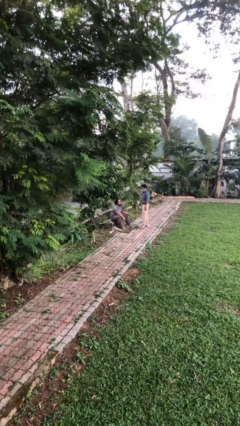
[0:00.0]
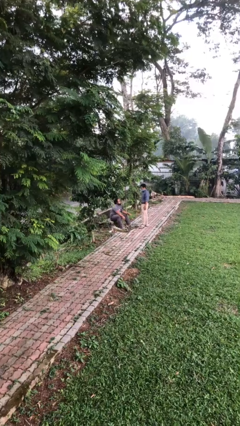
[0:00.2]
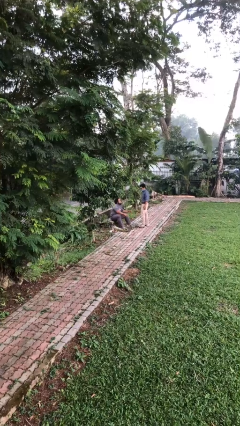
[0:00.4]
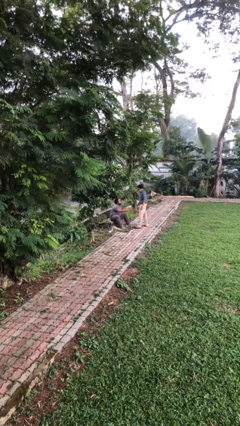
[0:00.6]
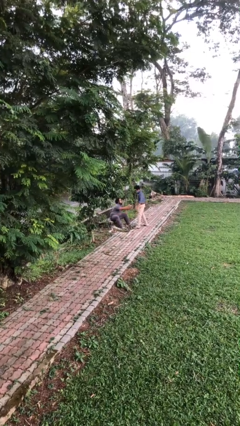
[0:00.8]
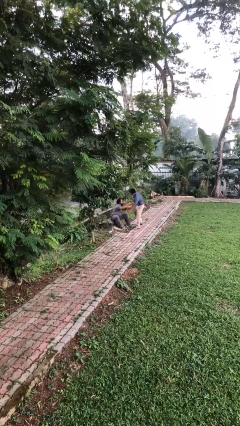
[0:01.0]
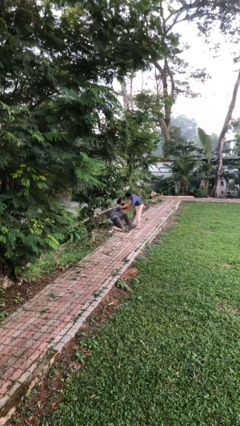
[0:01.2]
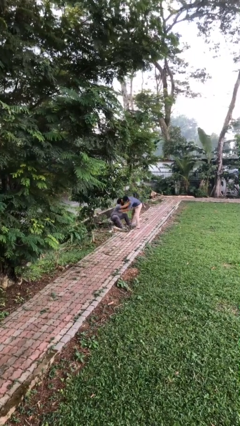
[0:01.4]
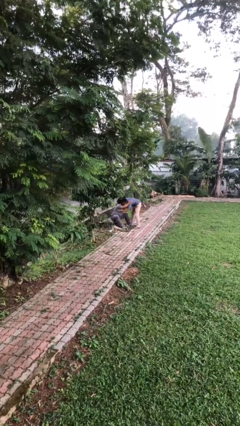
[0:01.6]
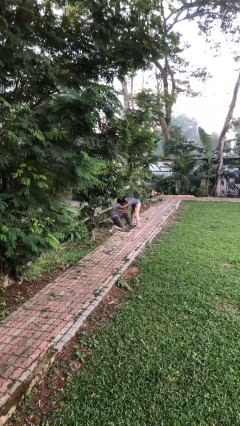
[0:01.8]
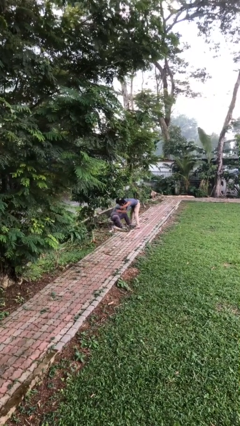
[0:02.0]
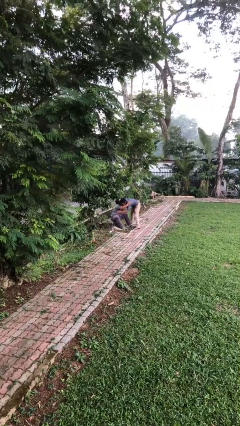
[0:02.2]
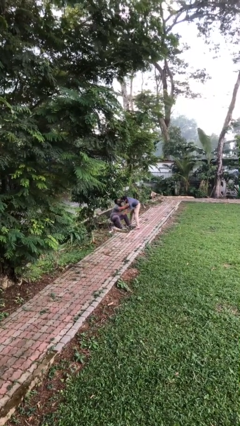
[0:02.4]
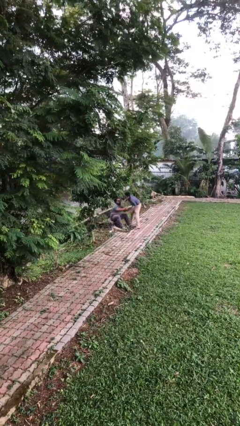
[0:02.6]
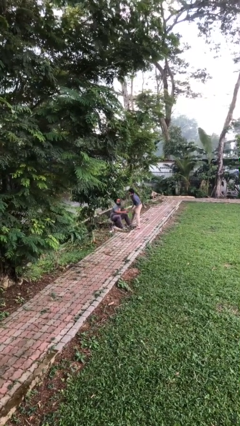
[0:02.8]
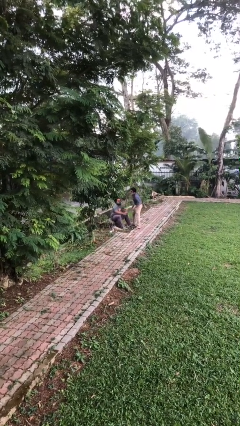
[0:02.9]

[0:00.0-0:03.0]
person embraces person

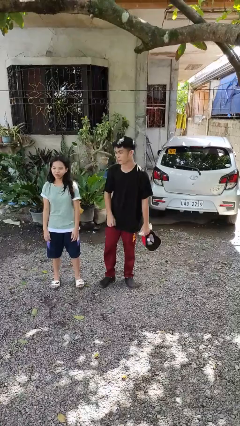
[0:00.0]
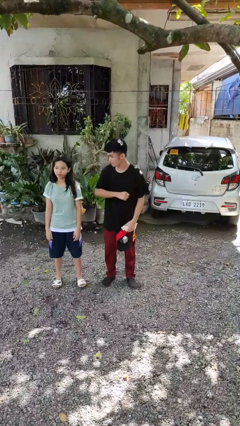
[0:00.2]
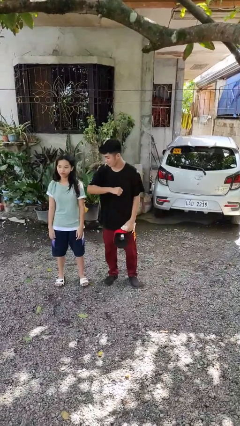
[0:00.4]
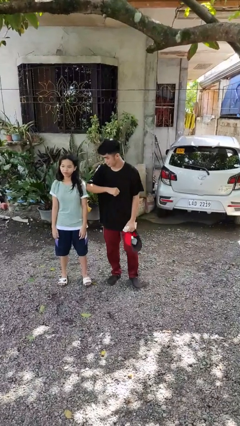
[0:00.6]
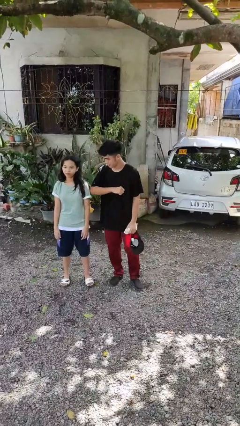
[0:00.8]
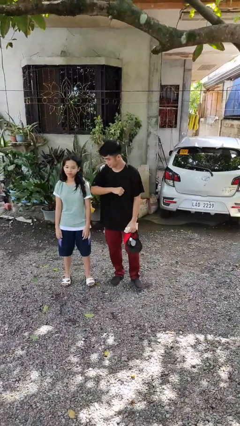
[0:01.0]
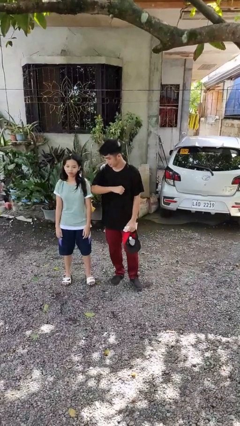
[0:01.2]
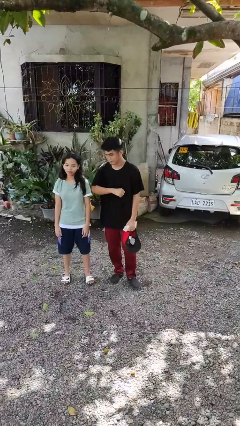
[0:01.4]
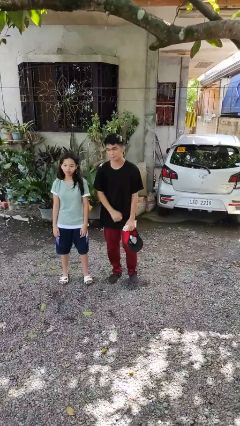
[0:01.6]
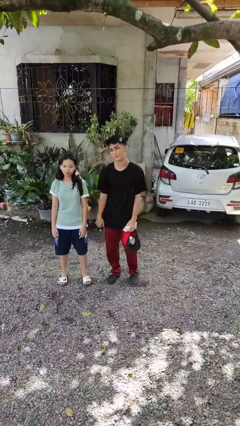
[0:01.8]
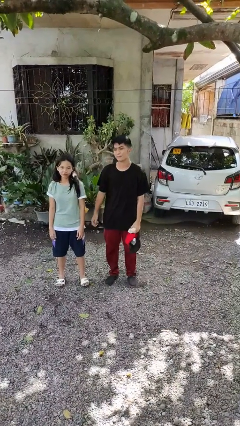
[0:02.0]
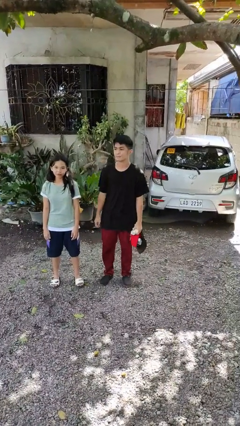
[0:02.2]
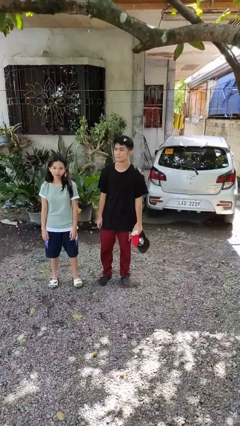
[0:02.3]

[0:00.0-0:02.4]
person nudges person with elbow

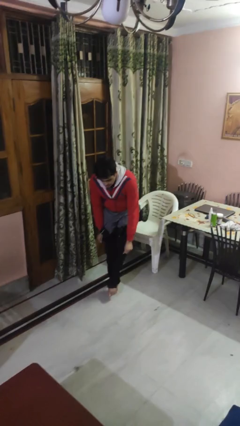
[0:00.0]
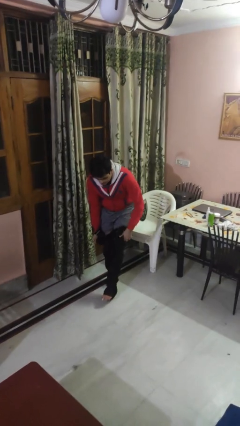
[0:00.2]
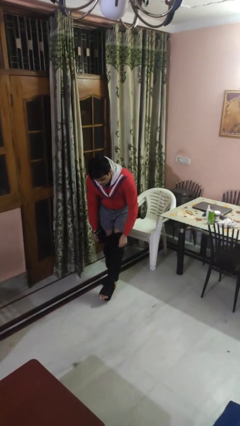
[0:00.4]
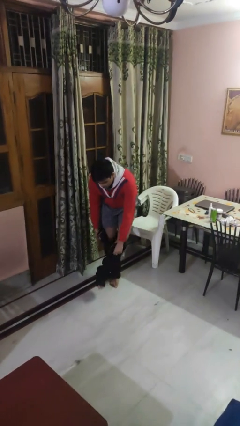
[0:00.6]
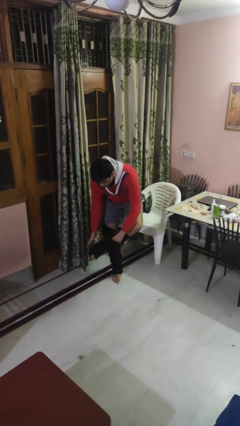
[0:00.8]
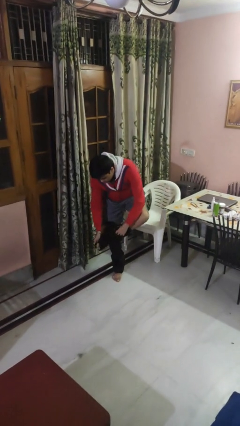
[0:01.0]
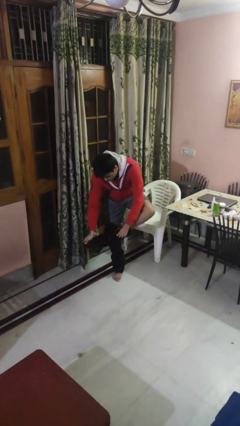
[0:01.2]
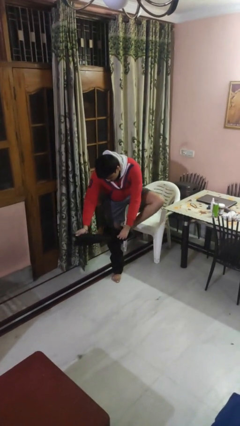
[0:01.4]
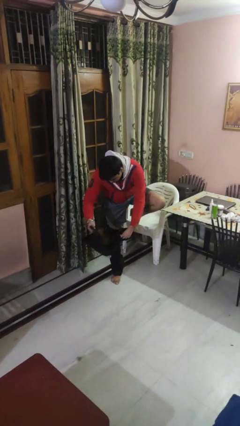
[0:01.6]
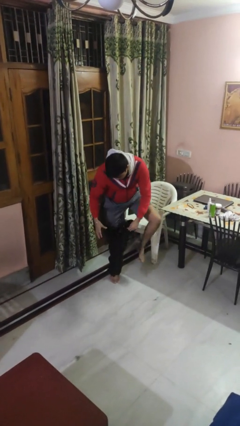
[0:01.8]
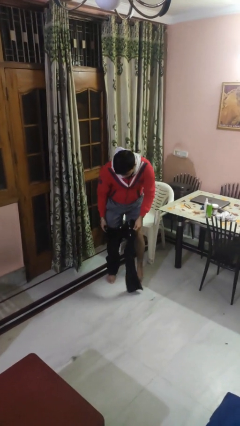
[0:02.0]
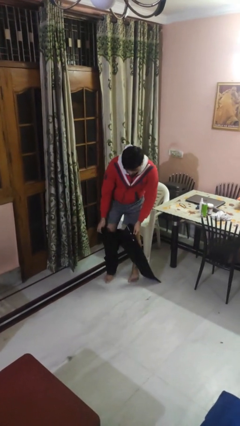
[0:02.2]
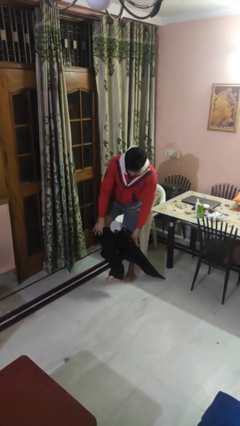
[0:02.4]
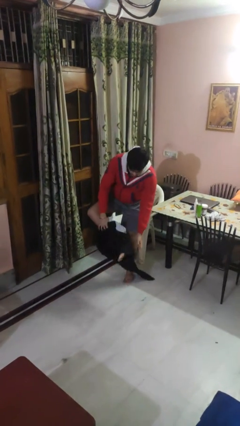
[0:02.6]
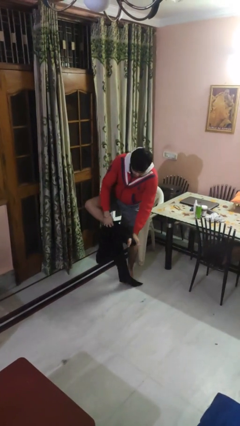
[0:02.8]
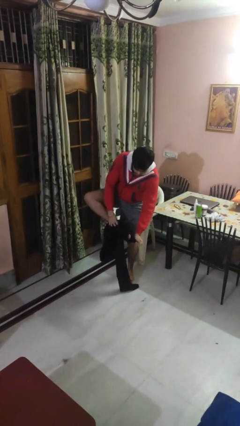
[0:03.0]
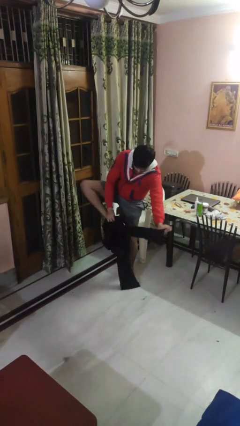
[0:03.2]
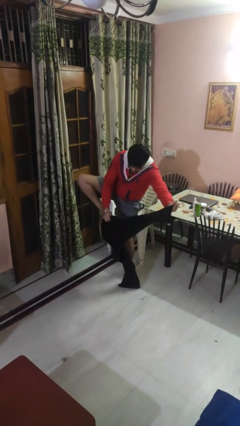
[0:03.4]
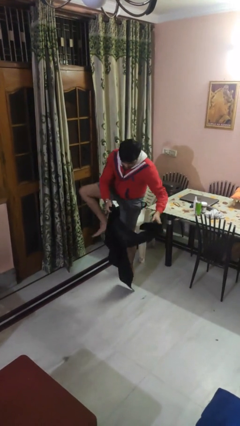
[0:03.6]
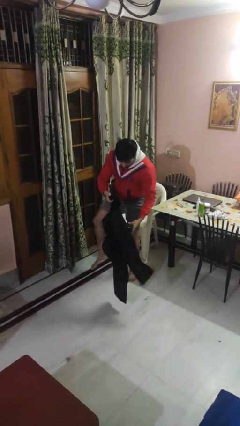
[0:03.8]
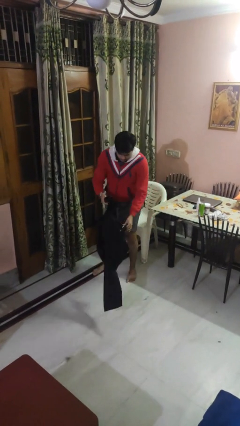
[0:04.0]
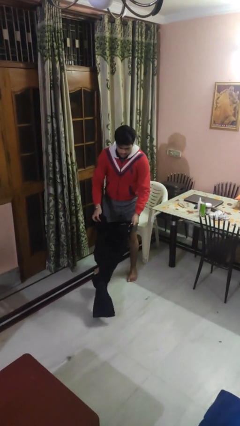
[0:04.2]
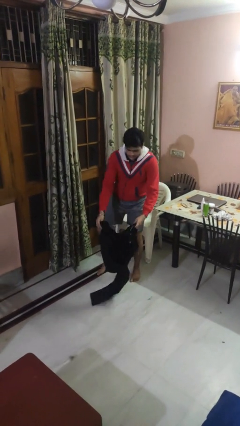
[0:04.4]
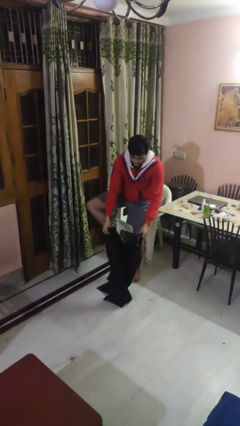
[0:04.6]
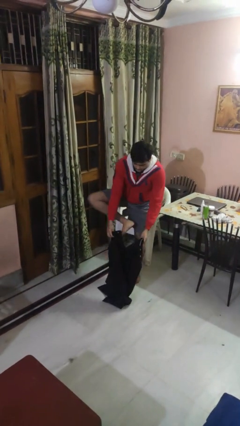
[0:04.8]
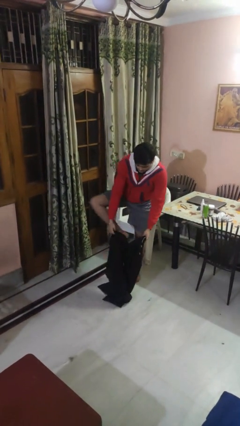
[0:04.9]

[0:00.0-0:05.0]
person takes off pants

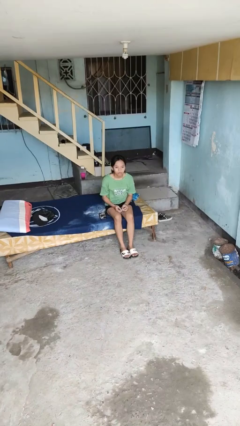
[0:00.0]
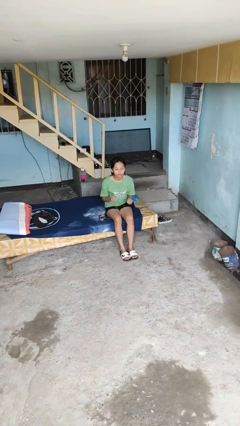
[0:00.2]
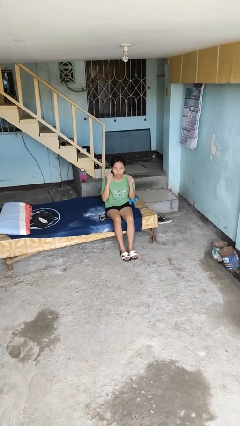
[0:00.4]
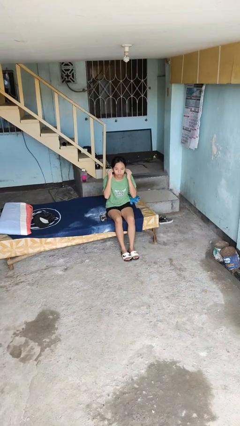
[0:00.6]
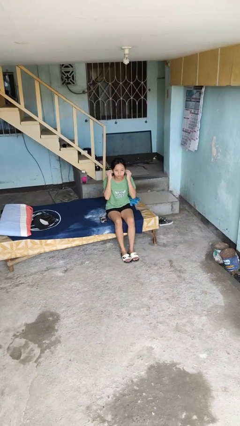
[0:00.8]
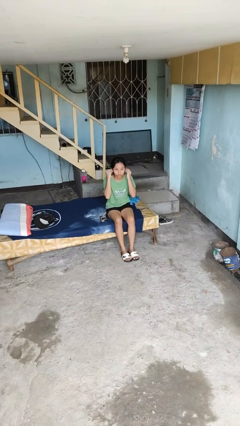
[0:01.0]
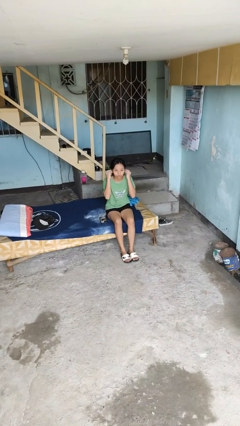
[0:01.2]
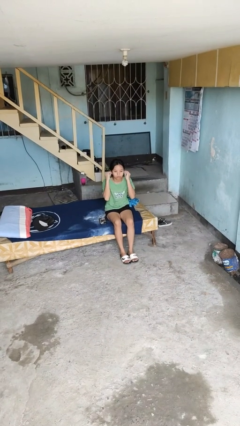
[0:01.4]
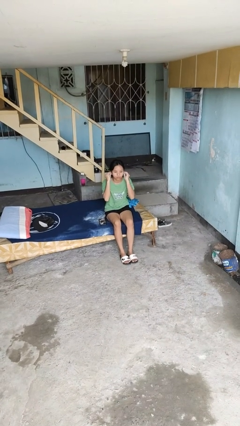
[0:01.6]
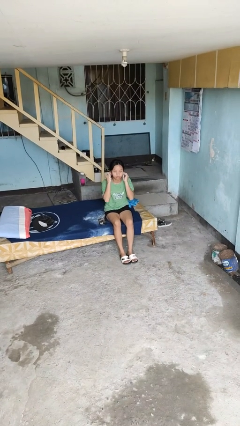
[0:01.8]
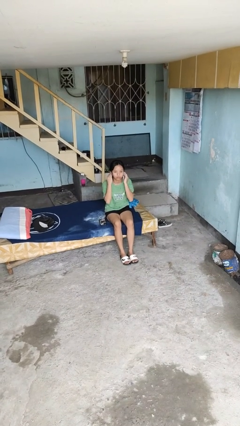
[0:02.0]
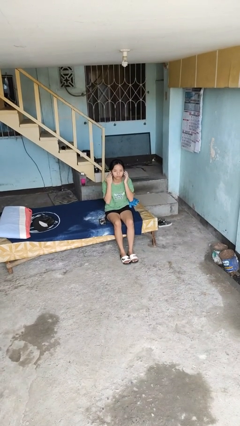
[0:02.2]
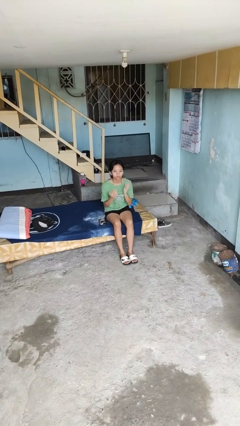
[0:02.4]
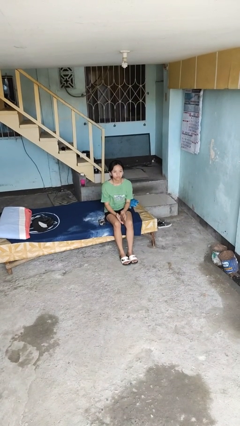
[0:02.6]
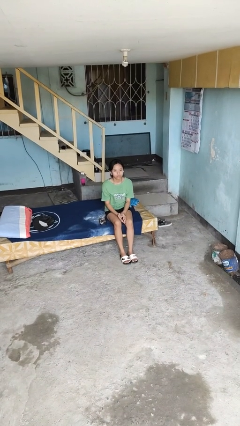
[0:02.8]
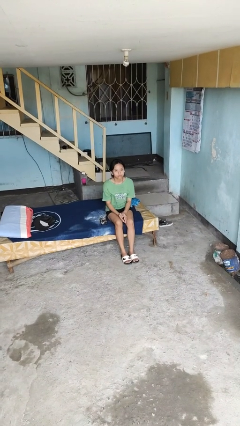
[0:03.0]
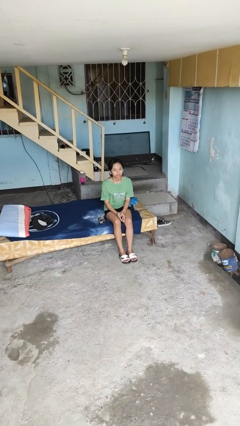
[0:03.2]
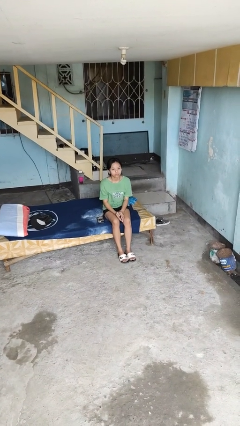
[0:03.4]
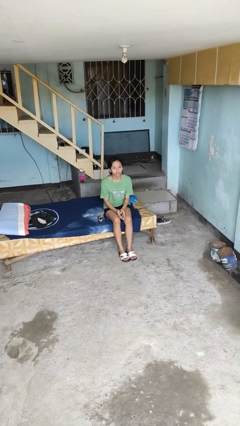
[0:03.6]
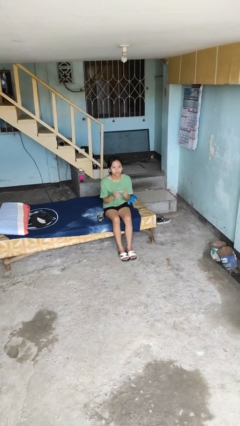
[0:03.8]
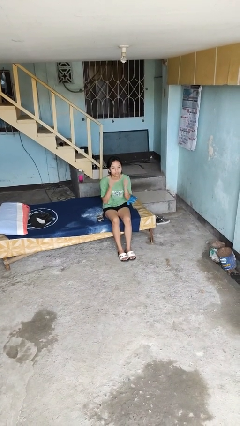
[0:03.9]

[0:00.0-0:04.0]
person puts on headphones

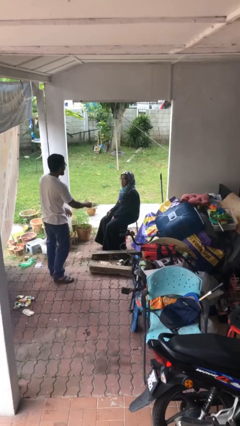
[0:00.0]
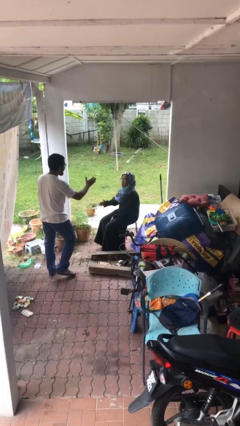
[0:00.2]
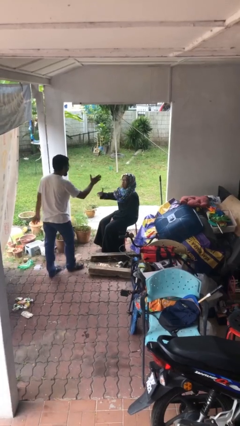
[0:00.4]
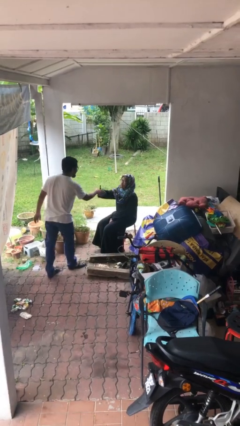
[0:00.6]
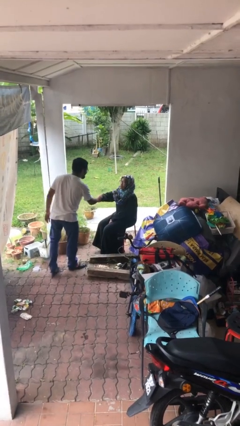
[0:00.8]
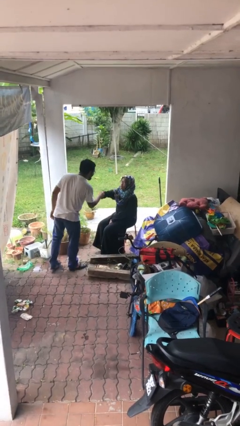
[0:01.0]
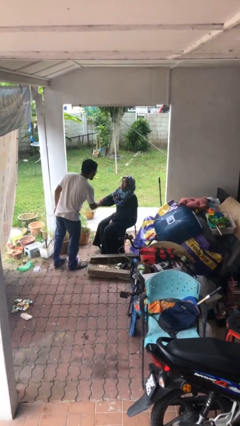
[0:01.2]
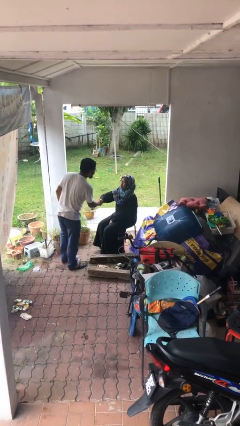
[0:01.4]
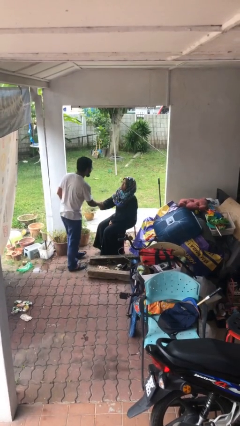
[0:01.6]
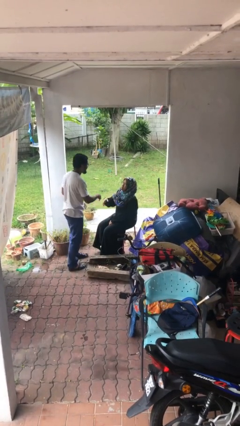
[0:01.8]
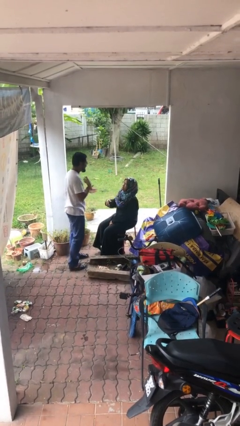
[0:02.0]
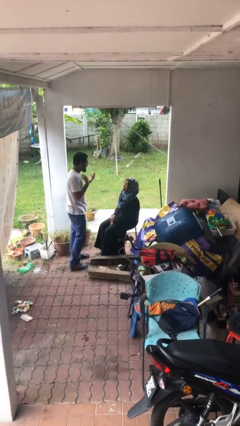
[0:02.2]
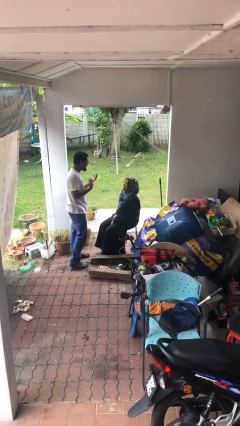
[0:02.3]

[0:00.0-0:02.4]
person shakes hand

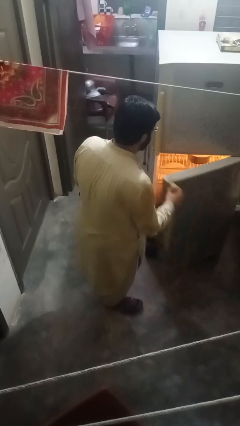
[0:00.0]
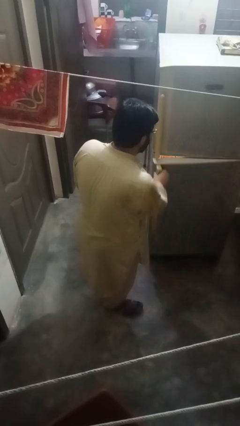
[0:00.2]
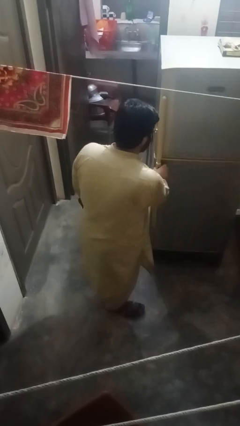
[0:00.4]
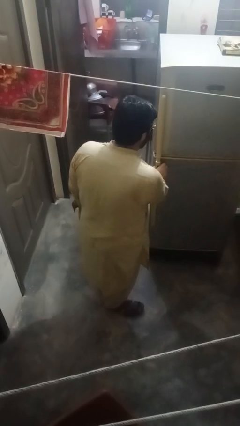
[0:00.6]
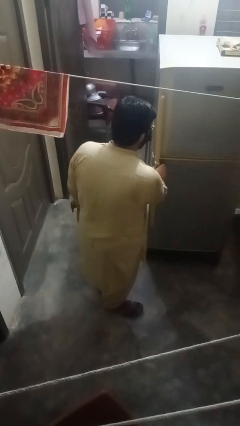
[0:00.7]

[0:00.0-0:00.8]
person closes refrigerator
